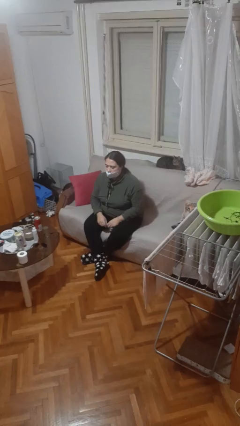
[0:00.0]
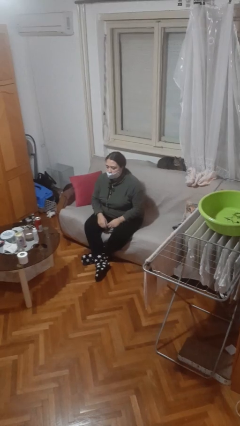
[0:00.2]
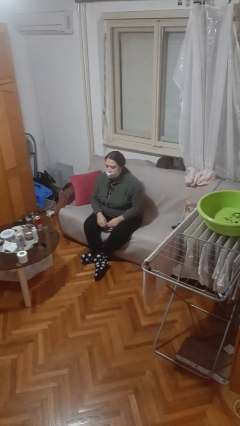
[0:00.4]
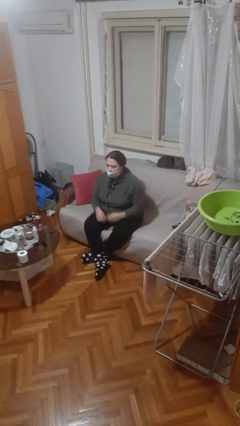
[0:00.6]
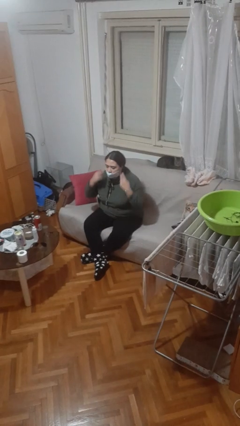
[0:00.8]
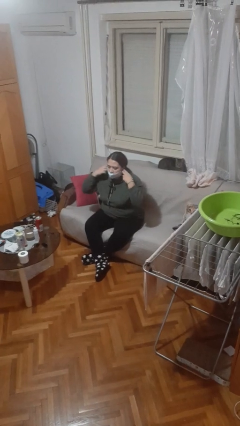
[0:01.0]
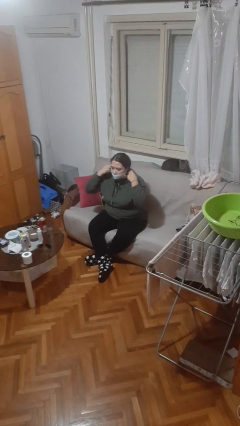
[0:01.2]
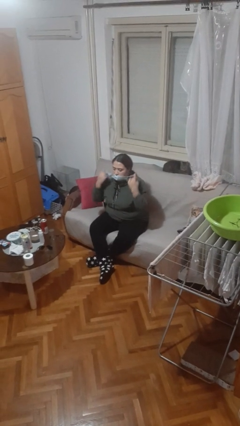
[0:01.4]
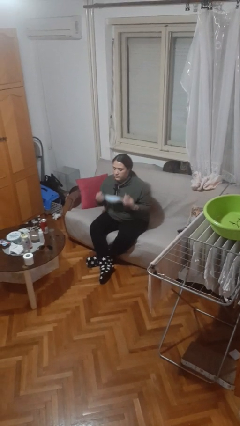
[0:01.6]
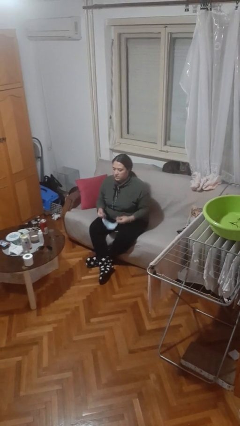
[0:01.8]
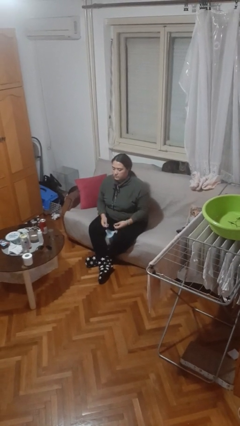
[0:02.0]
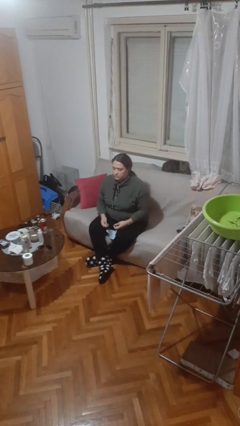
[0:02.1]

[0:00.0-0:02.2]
person takes off facemask

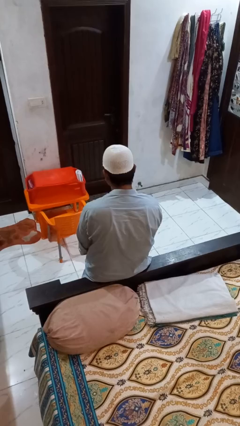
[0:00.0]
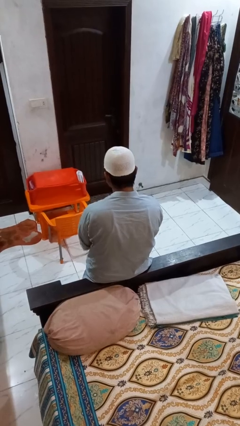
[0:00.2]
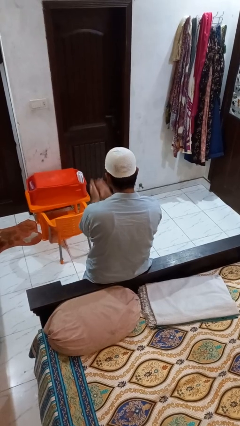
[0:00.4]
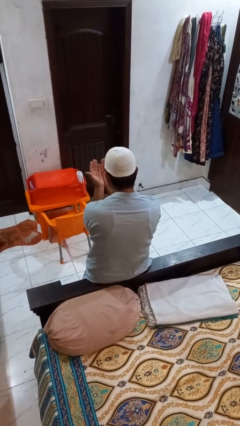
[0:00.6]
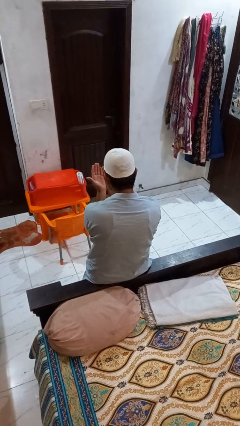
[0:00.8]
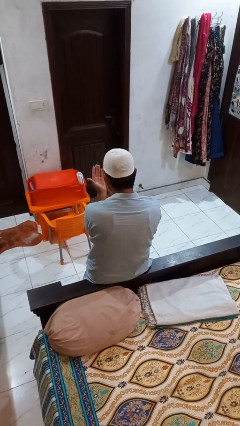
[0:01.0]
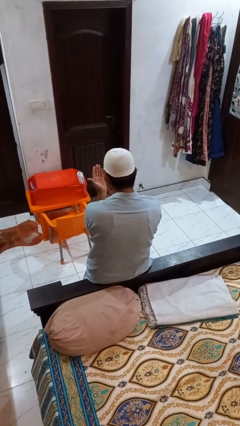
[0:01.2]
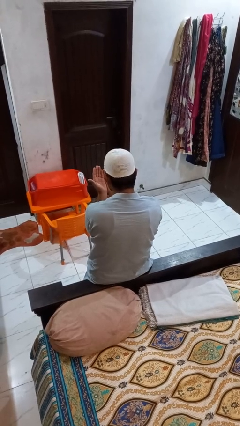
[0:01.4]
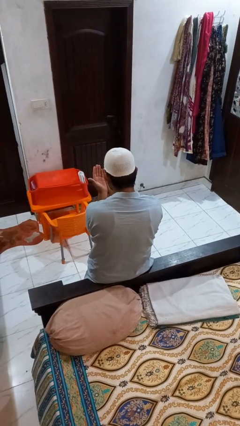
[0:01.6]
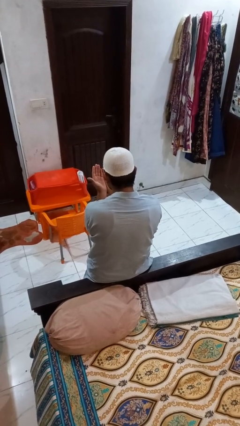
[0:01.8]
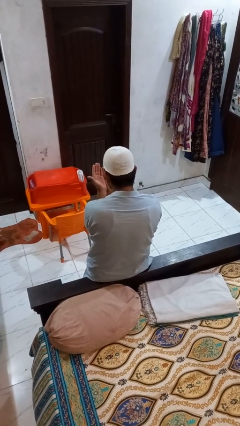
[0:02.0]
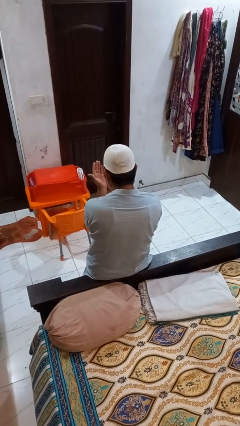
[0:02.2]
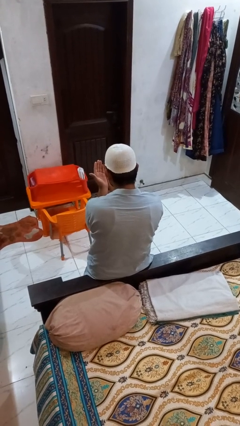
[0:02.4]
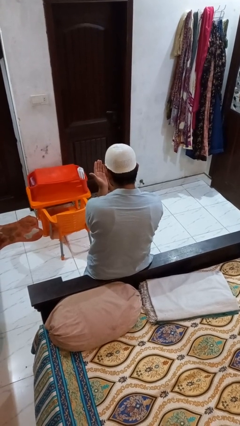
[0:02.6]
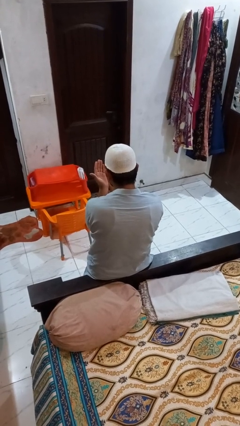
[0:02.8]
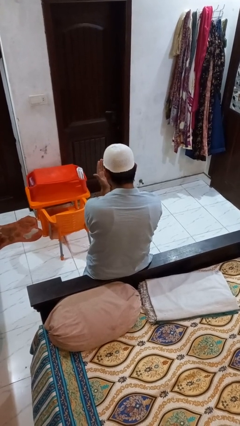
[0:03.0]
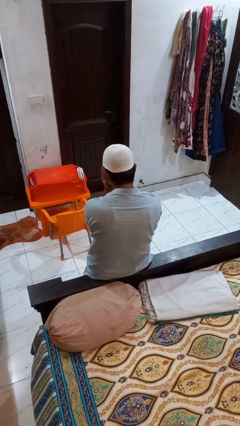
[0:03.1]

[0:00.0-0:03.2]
person prays

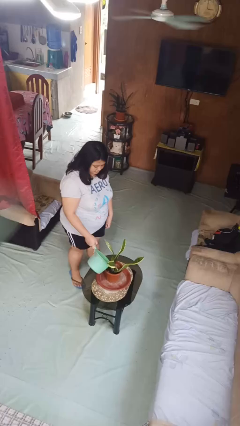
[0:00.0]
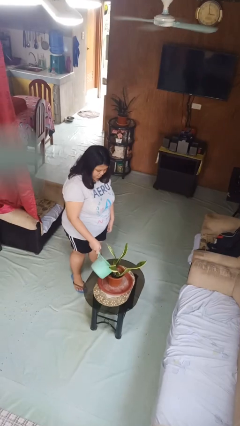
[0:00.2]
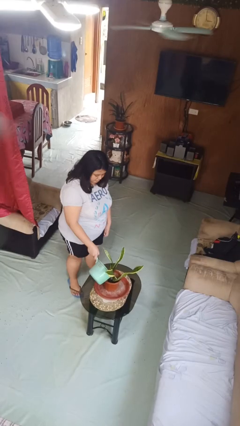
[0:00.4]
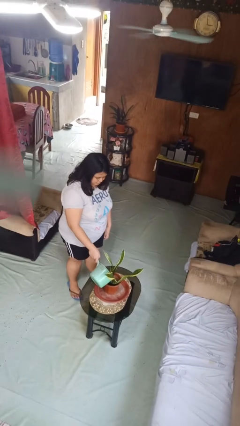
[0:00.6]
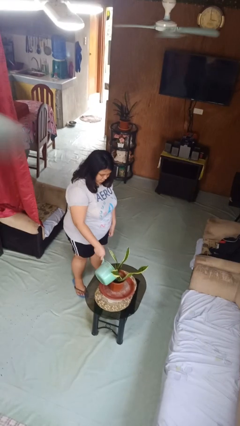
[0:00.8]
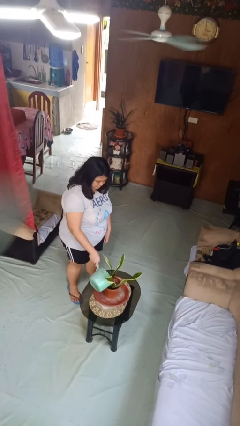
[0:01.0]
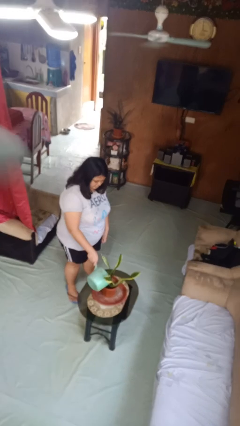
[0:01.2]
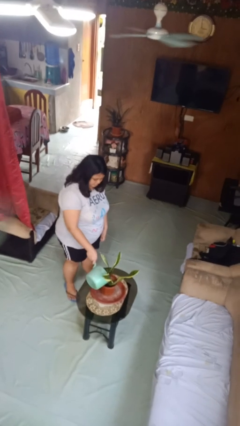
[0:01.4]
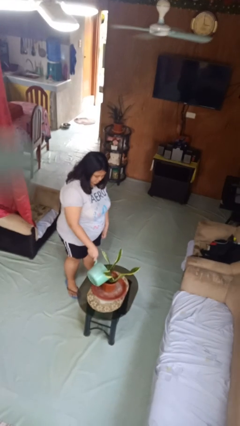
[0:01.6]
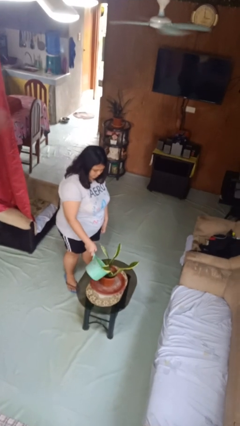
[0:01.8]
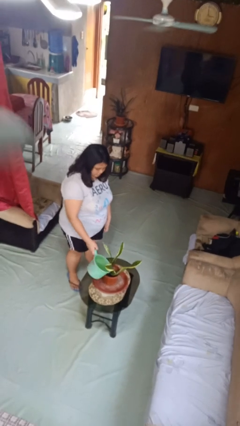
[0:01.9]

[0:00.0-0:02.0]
person waters houseplant

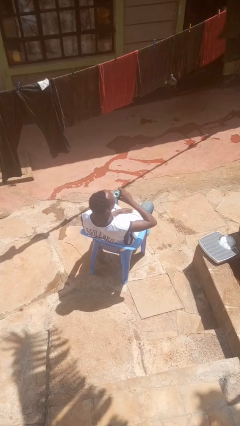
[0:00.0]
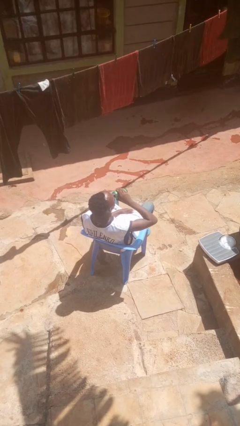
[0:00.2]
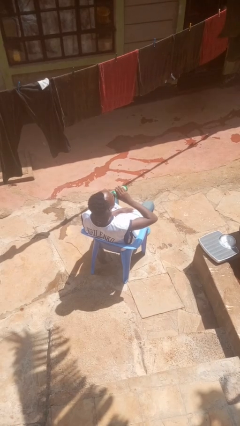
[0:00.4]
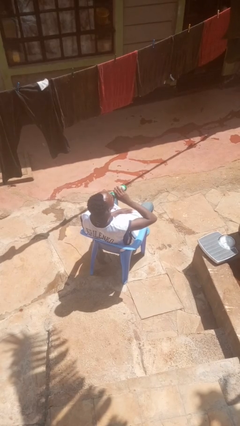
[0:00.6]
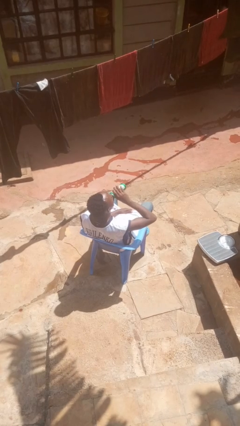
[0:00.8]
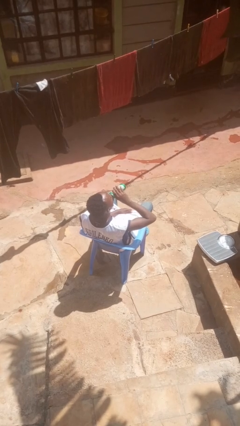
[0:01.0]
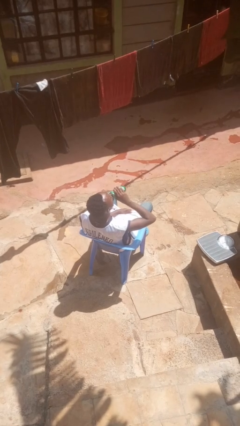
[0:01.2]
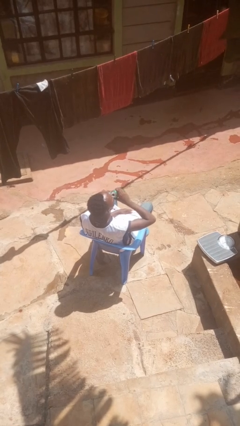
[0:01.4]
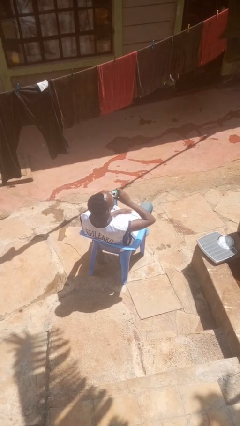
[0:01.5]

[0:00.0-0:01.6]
person drinks from beverage can

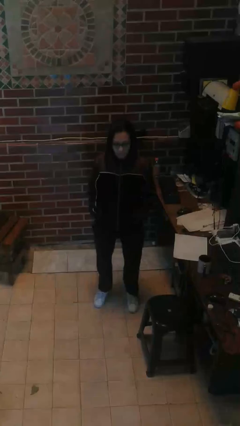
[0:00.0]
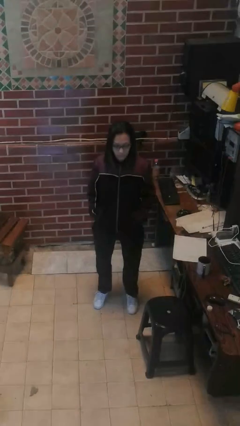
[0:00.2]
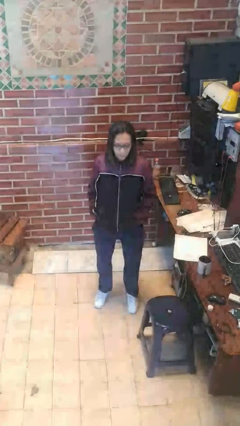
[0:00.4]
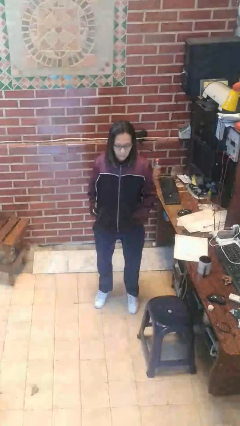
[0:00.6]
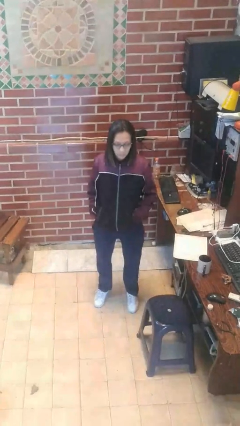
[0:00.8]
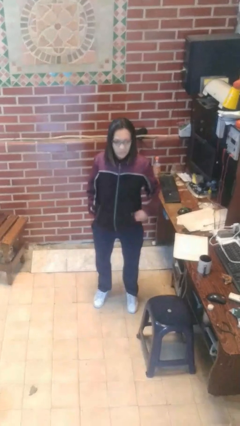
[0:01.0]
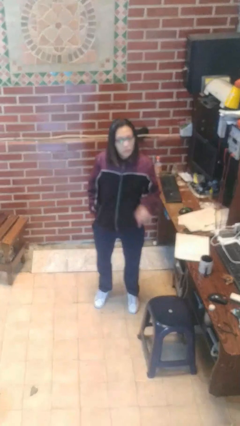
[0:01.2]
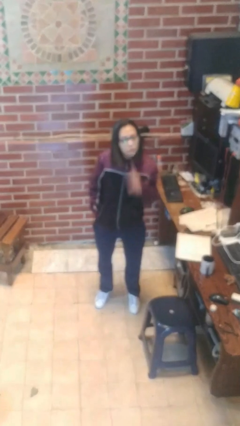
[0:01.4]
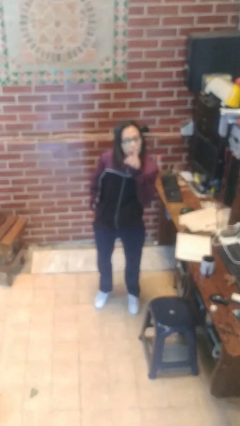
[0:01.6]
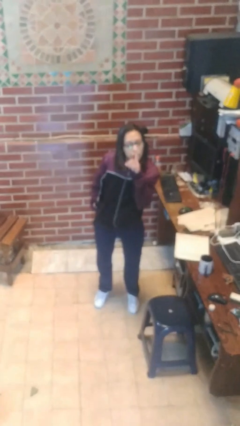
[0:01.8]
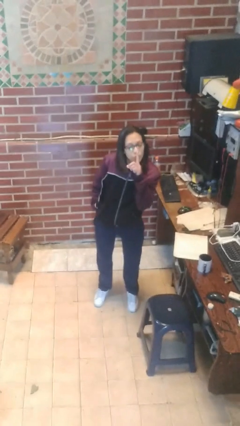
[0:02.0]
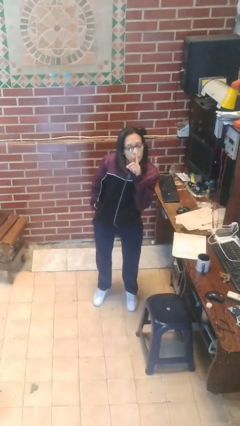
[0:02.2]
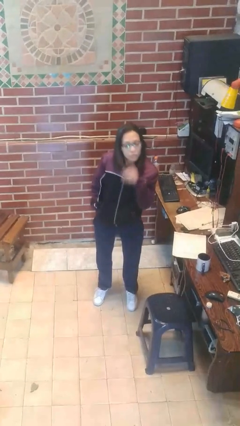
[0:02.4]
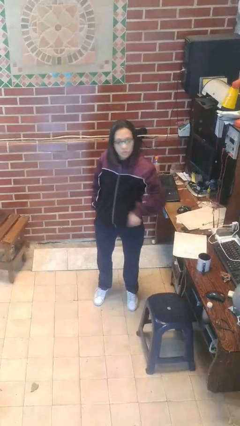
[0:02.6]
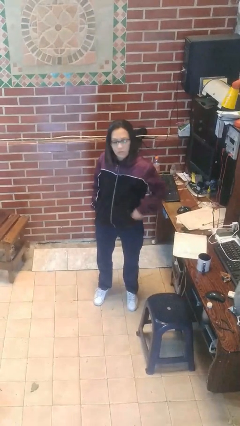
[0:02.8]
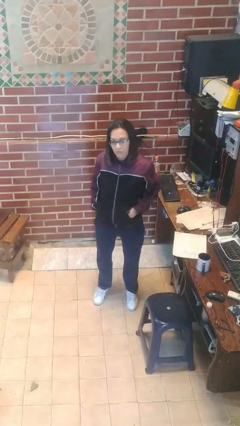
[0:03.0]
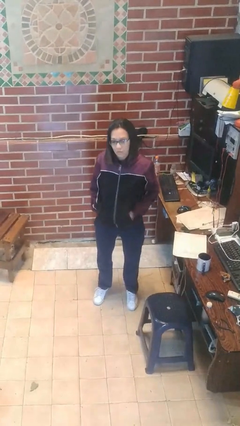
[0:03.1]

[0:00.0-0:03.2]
person gestures be quiet

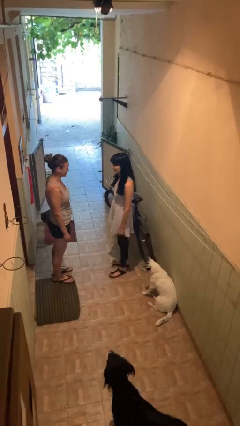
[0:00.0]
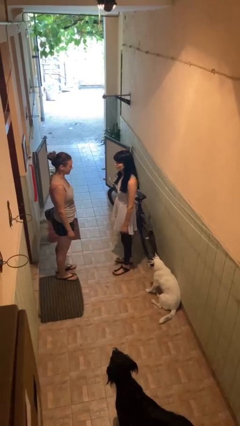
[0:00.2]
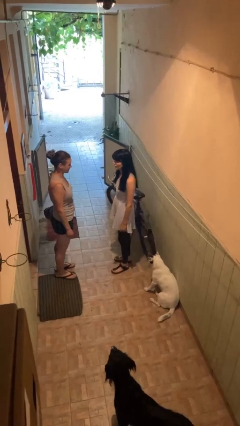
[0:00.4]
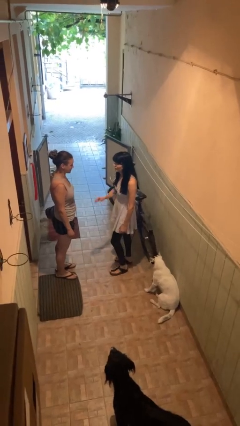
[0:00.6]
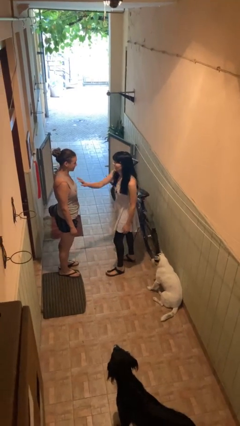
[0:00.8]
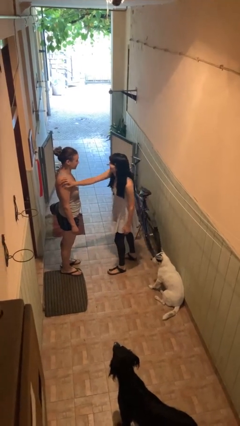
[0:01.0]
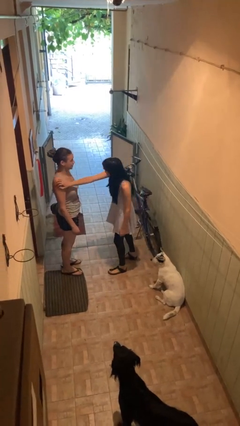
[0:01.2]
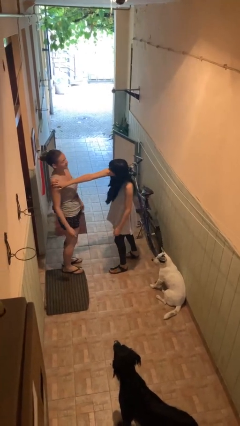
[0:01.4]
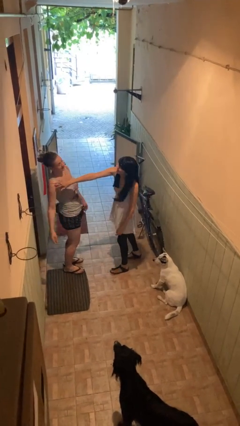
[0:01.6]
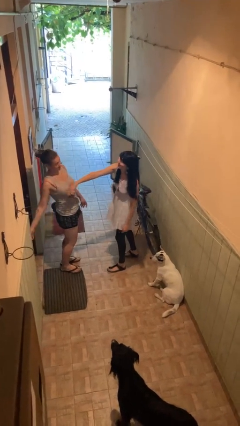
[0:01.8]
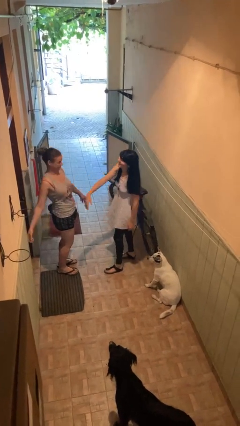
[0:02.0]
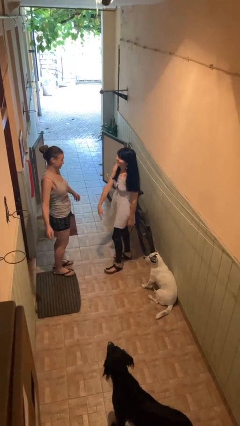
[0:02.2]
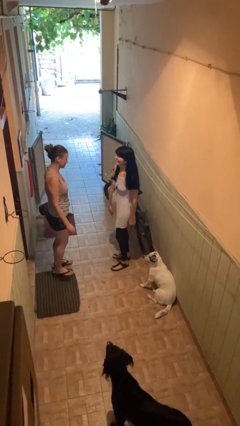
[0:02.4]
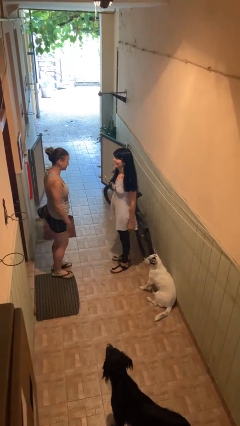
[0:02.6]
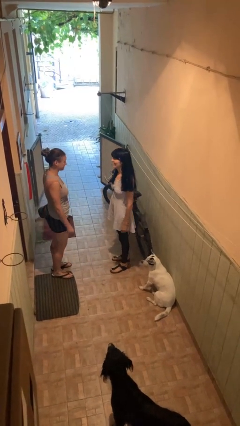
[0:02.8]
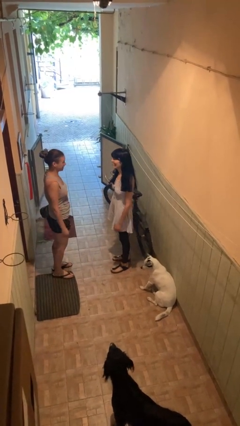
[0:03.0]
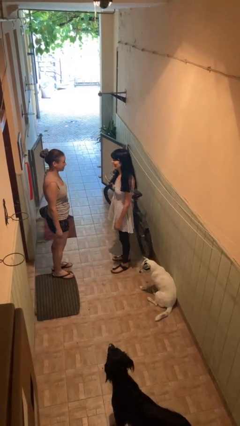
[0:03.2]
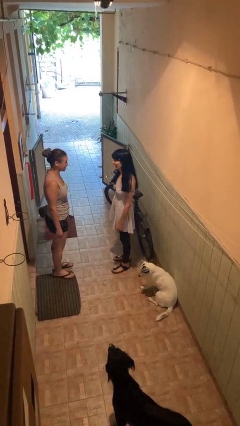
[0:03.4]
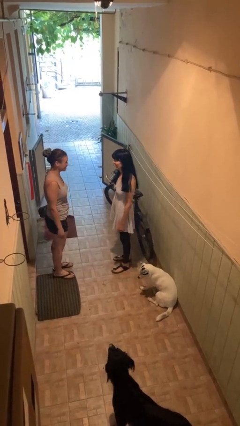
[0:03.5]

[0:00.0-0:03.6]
person shoves person

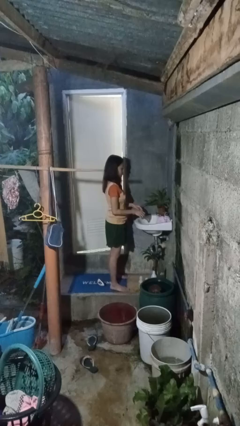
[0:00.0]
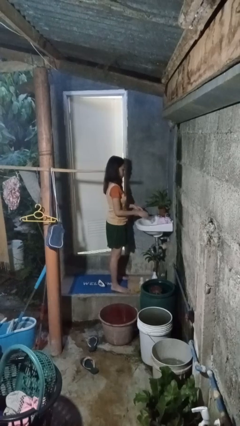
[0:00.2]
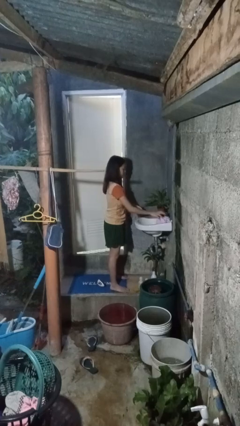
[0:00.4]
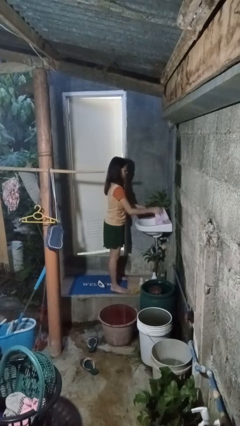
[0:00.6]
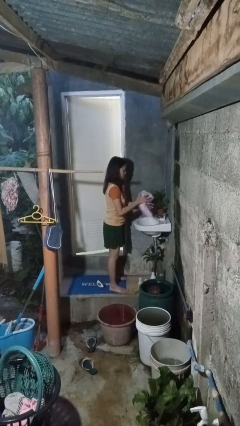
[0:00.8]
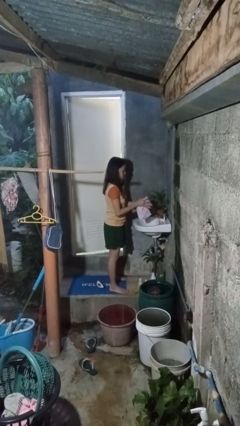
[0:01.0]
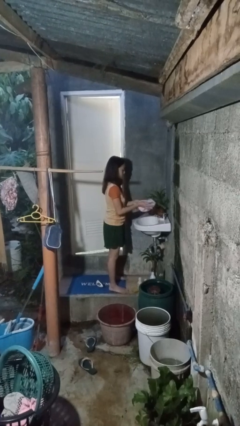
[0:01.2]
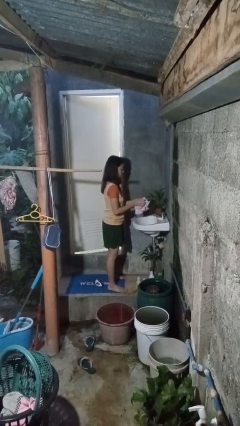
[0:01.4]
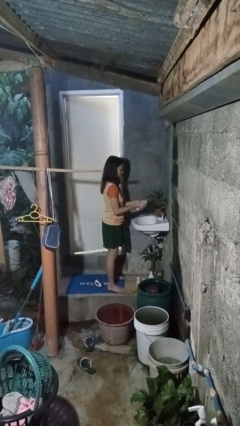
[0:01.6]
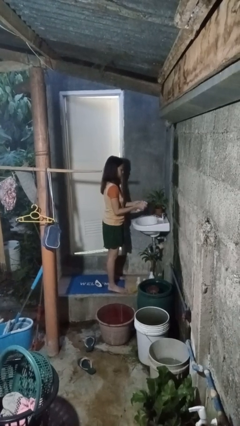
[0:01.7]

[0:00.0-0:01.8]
person dries hands with towel
